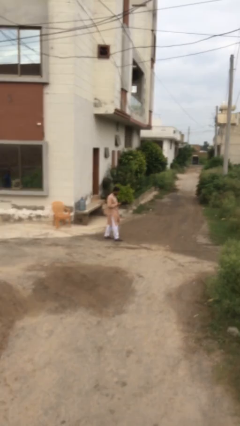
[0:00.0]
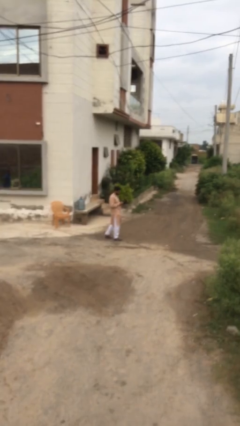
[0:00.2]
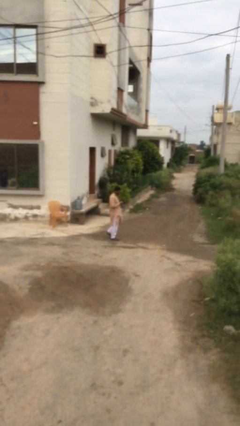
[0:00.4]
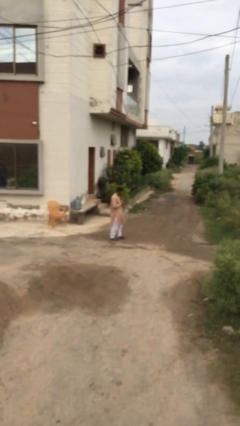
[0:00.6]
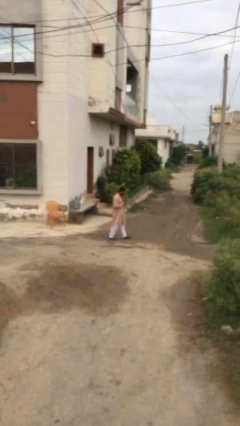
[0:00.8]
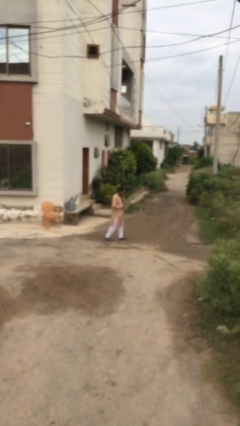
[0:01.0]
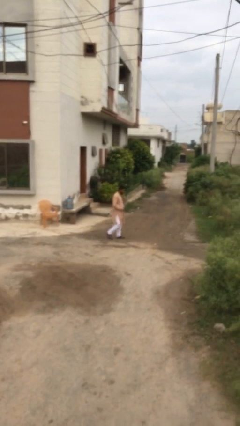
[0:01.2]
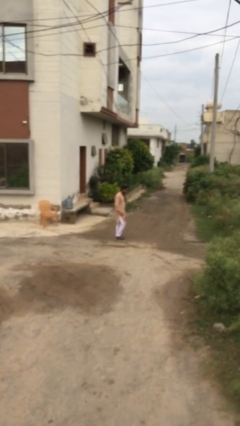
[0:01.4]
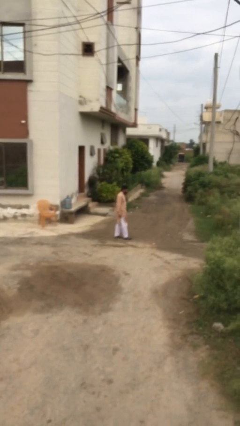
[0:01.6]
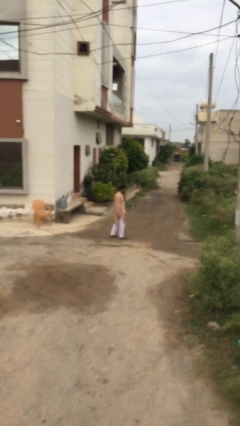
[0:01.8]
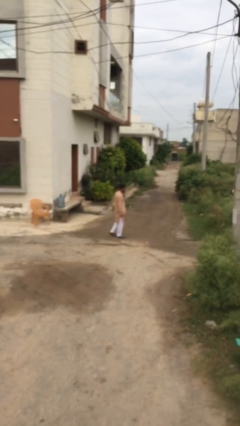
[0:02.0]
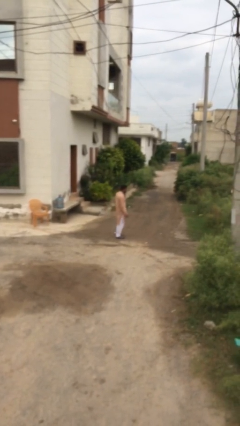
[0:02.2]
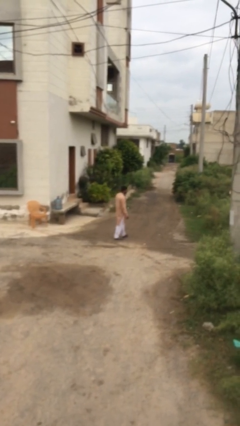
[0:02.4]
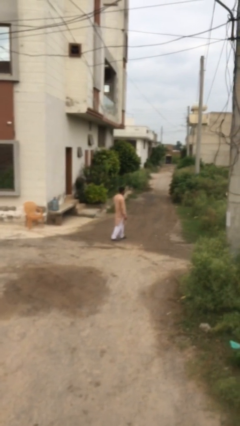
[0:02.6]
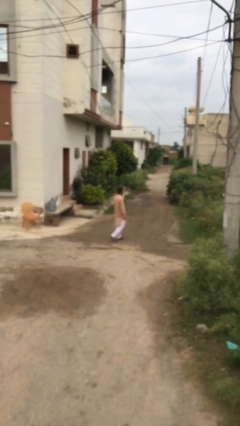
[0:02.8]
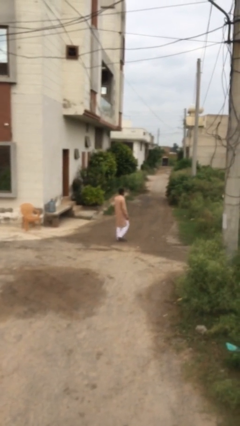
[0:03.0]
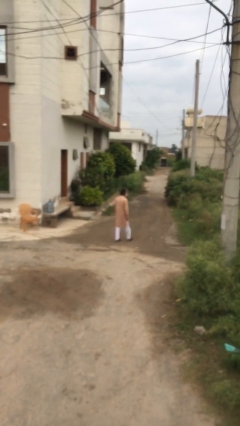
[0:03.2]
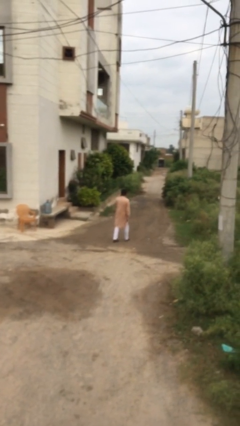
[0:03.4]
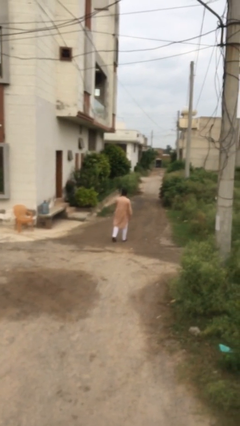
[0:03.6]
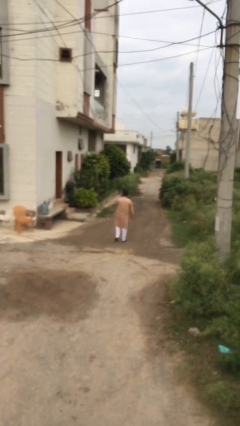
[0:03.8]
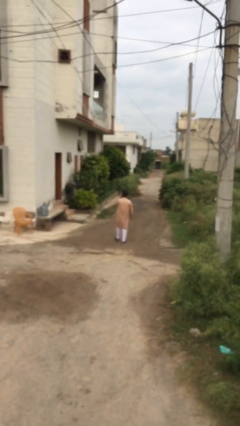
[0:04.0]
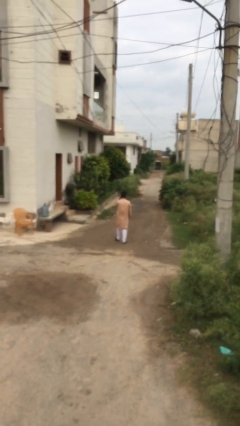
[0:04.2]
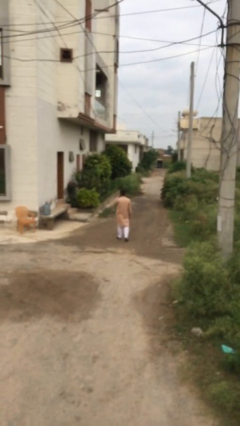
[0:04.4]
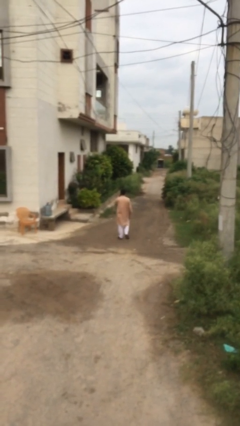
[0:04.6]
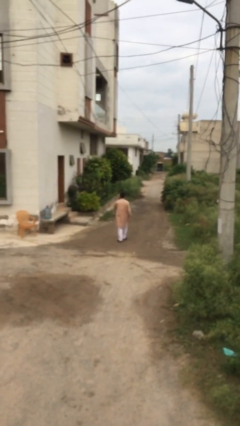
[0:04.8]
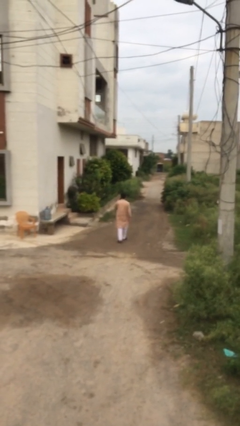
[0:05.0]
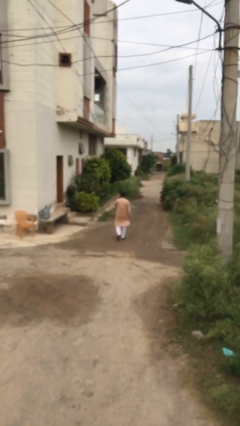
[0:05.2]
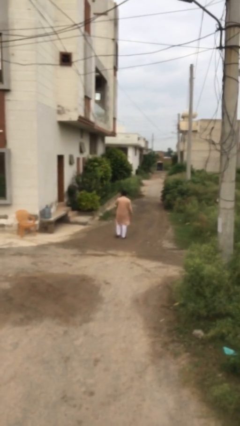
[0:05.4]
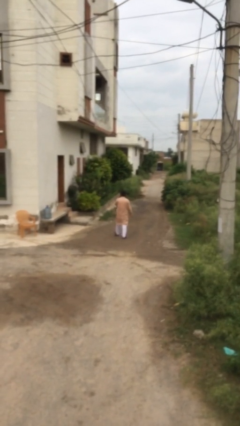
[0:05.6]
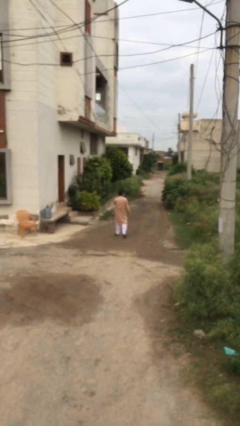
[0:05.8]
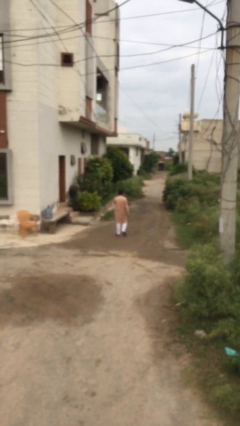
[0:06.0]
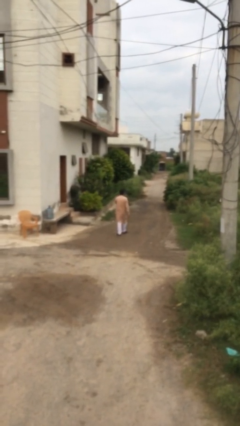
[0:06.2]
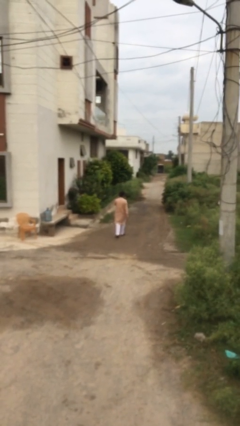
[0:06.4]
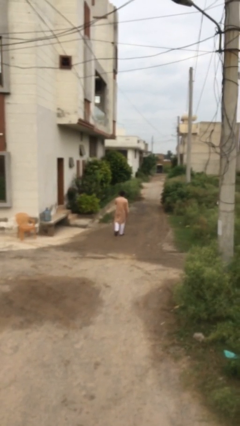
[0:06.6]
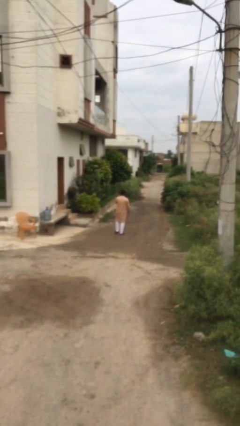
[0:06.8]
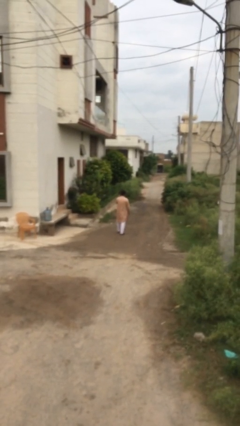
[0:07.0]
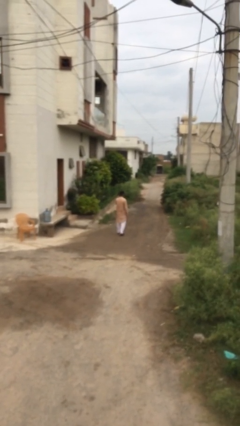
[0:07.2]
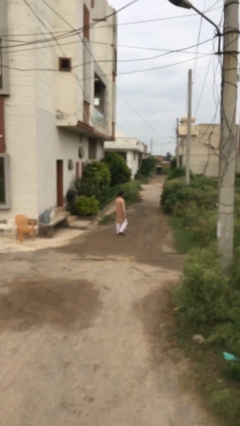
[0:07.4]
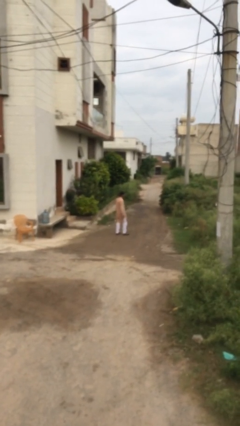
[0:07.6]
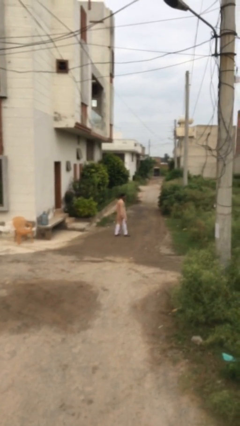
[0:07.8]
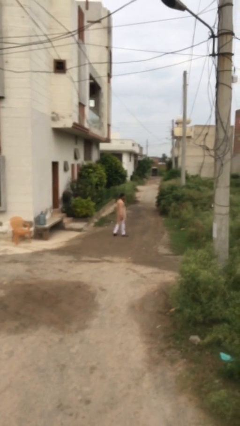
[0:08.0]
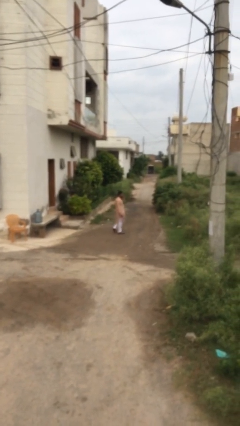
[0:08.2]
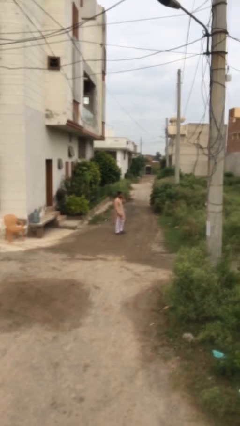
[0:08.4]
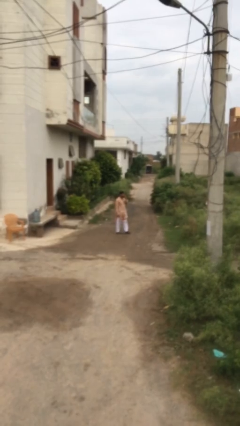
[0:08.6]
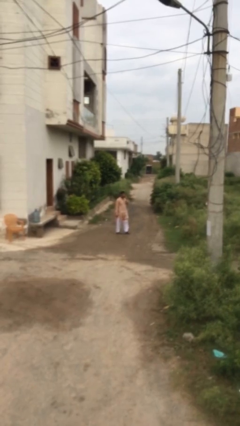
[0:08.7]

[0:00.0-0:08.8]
person talks on phone

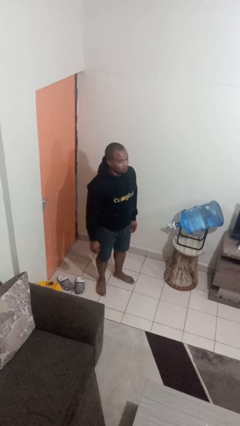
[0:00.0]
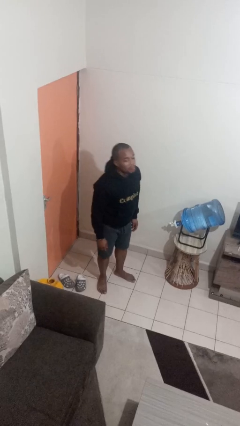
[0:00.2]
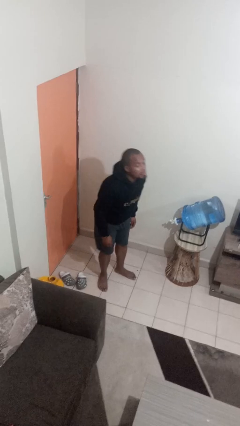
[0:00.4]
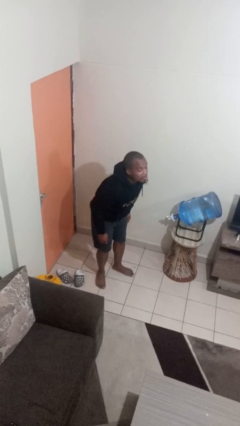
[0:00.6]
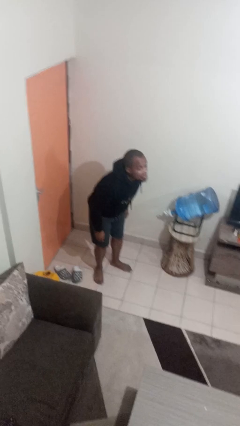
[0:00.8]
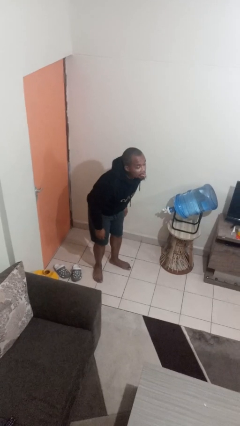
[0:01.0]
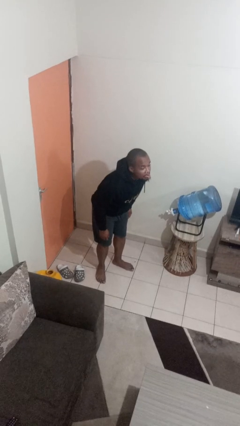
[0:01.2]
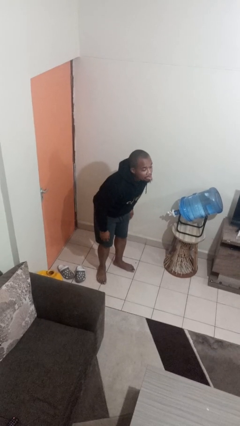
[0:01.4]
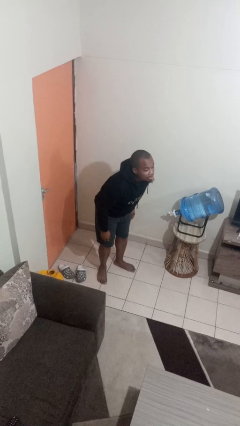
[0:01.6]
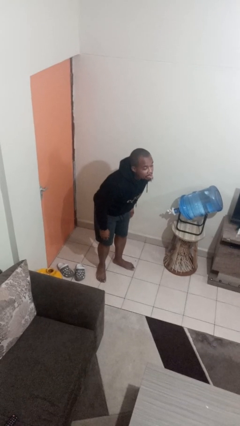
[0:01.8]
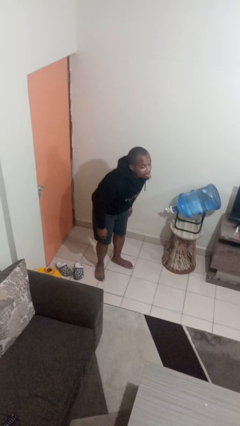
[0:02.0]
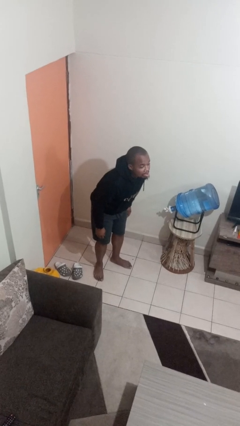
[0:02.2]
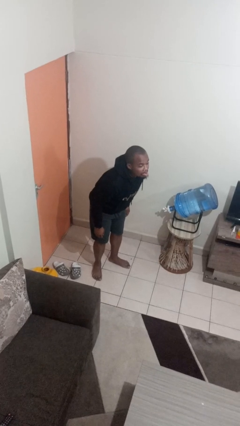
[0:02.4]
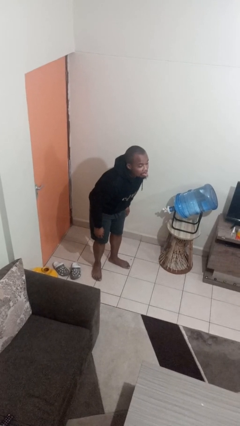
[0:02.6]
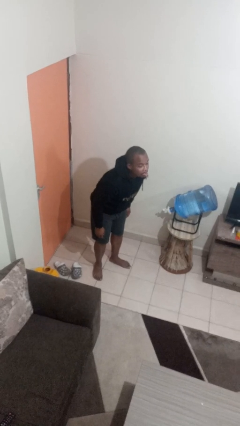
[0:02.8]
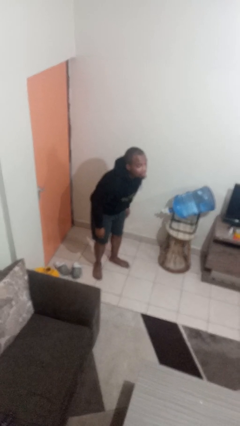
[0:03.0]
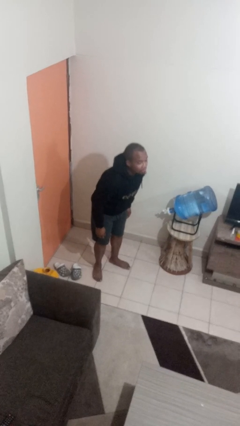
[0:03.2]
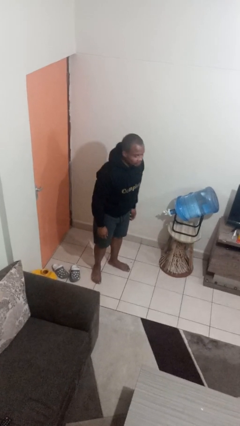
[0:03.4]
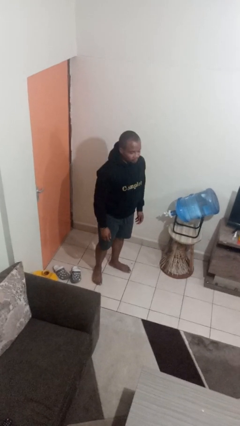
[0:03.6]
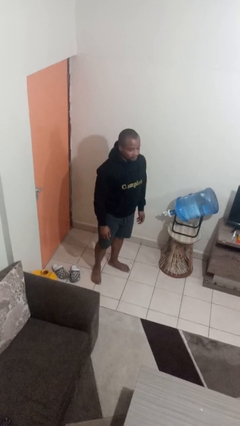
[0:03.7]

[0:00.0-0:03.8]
person sticks out tongue

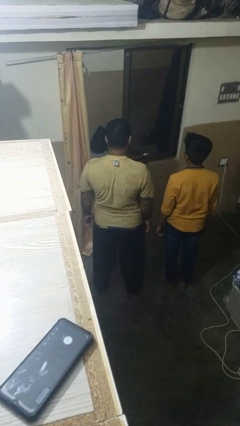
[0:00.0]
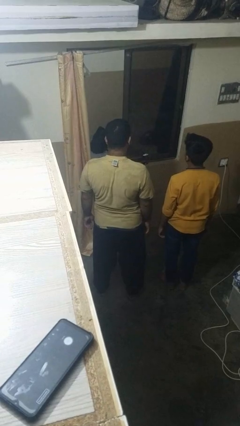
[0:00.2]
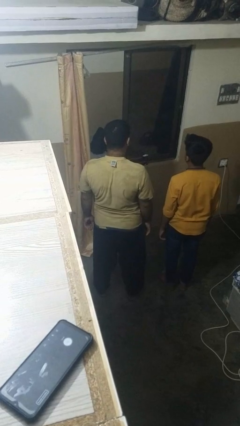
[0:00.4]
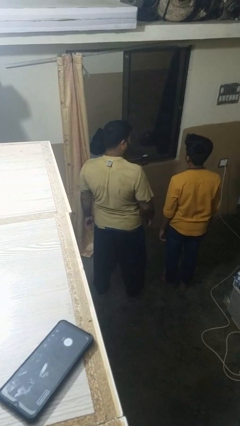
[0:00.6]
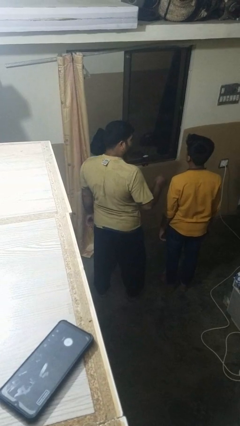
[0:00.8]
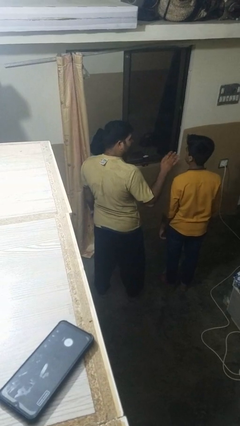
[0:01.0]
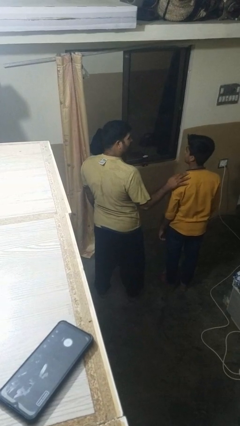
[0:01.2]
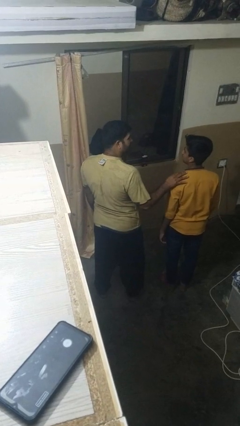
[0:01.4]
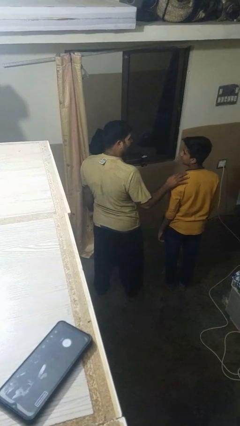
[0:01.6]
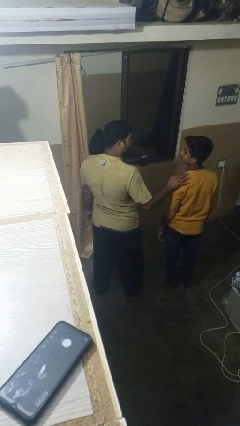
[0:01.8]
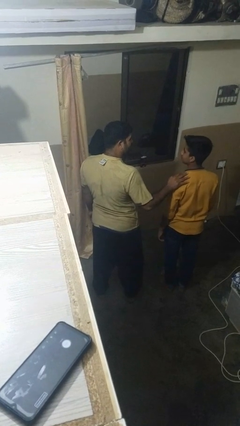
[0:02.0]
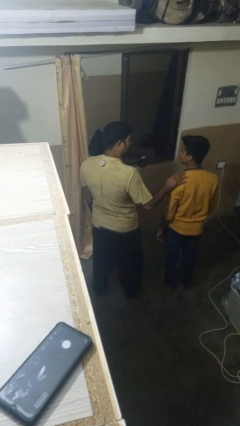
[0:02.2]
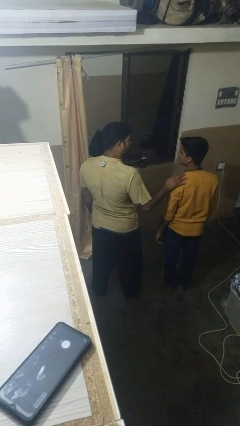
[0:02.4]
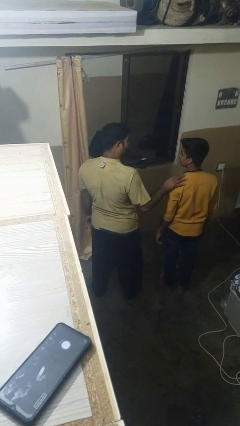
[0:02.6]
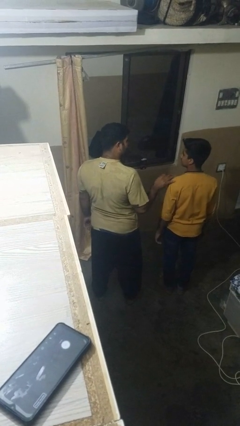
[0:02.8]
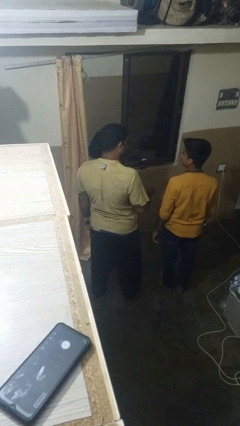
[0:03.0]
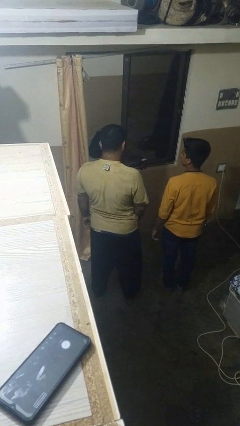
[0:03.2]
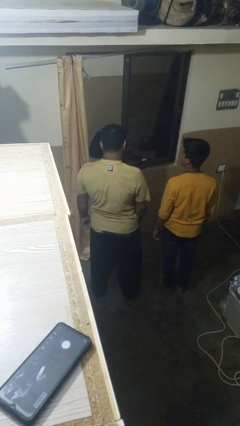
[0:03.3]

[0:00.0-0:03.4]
person pounds shoulders of person

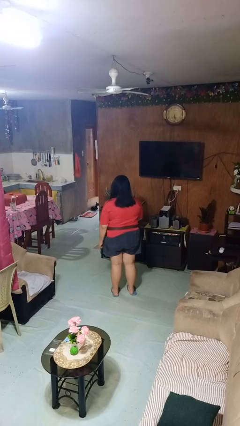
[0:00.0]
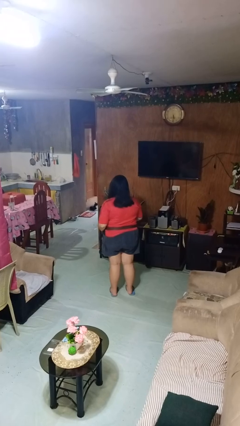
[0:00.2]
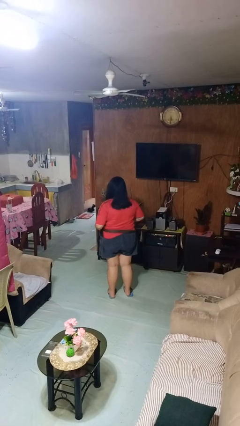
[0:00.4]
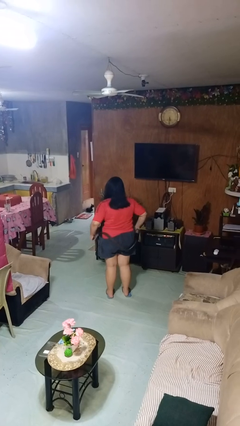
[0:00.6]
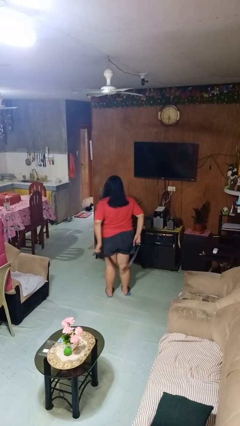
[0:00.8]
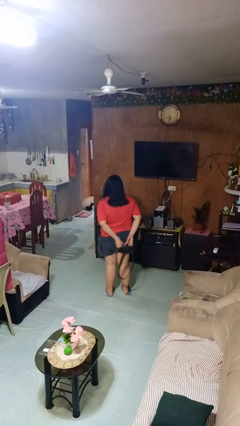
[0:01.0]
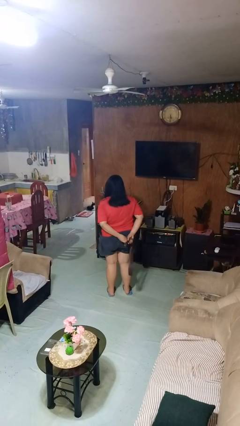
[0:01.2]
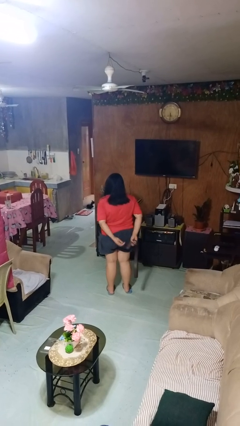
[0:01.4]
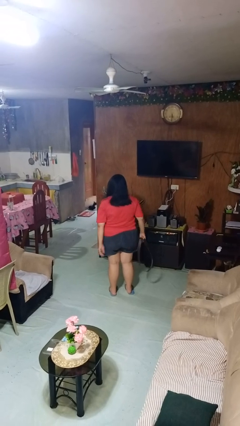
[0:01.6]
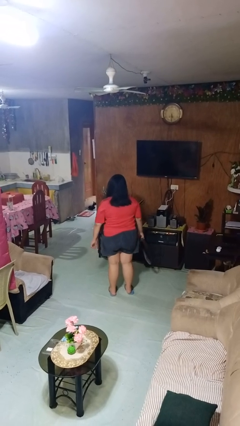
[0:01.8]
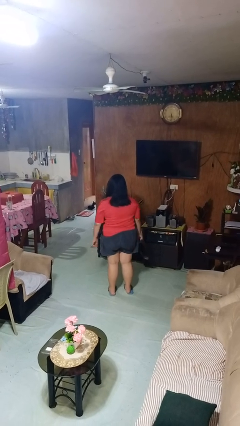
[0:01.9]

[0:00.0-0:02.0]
person takes off belt
